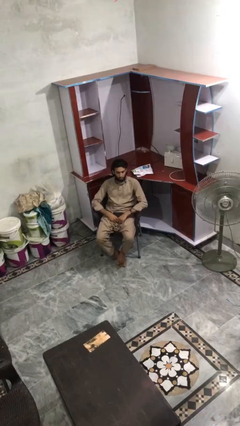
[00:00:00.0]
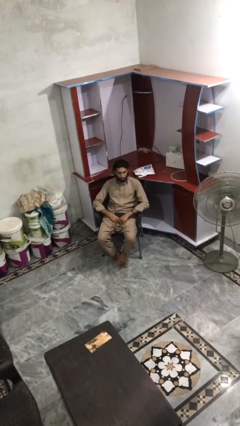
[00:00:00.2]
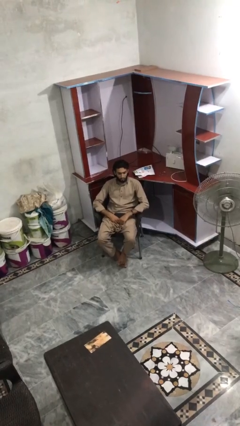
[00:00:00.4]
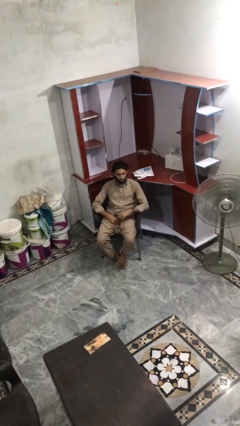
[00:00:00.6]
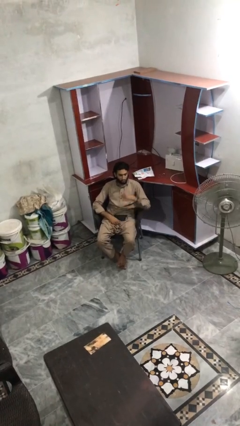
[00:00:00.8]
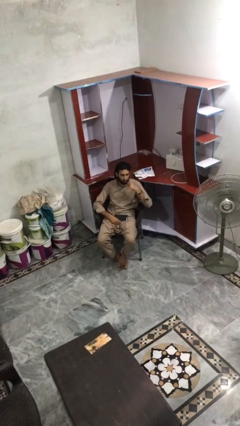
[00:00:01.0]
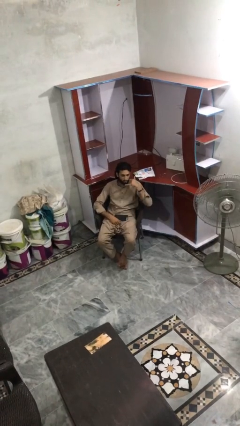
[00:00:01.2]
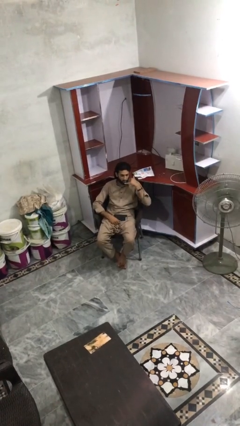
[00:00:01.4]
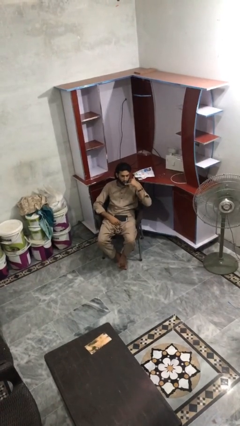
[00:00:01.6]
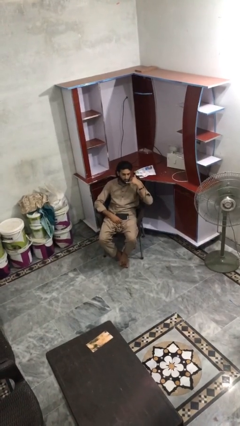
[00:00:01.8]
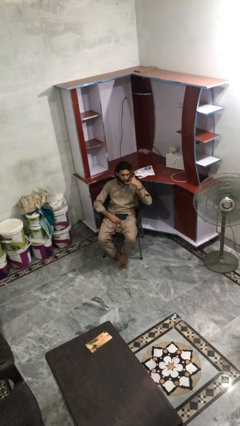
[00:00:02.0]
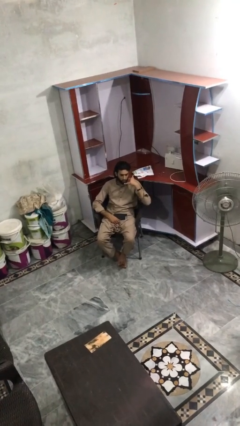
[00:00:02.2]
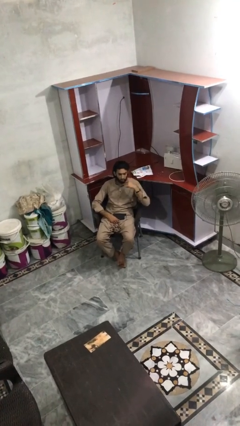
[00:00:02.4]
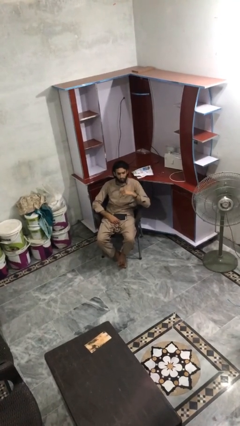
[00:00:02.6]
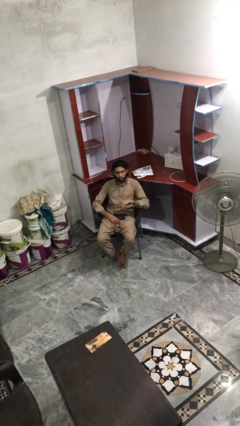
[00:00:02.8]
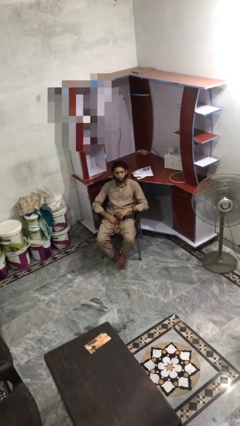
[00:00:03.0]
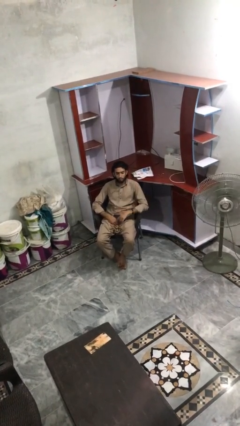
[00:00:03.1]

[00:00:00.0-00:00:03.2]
person gestures call me

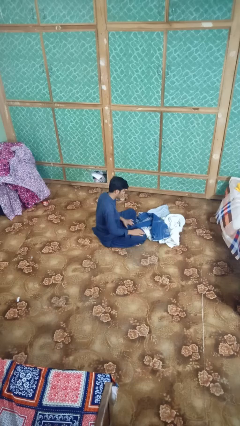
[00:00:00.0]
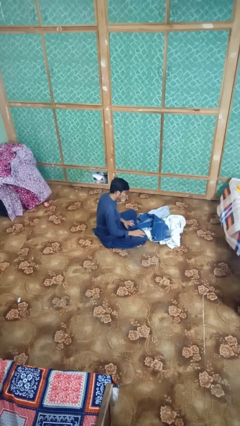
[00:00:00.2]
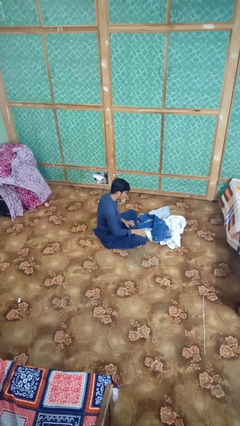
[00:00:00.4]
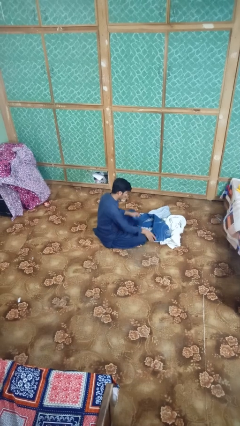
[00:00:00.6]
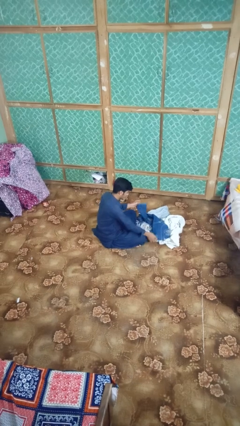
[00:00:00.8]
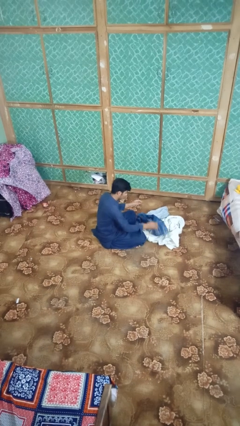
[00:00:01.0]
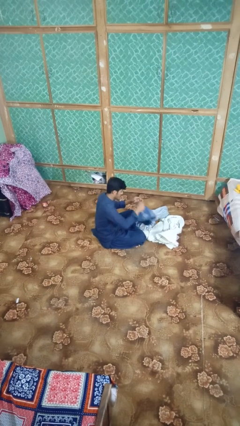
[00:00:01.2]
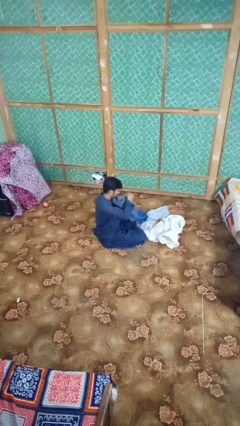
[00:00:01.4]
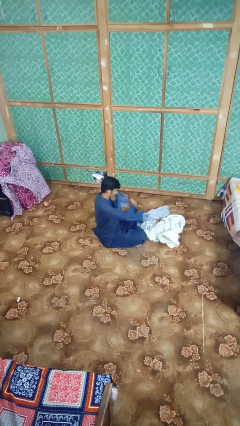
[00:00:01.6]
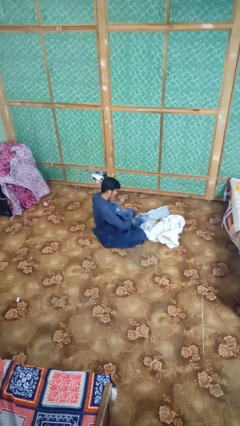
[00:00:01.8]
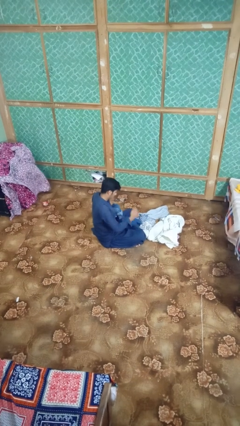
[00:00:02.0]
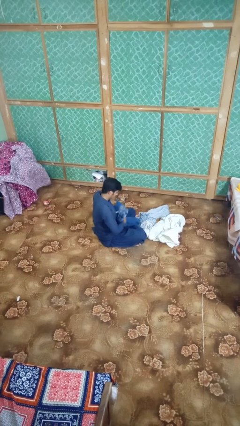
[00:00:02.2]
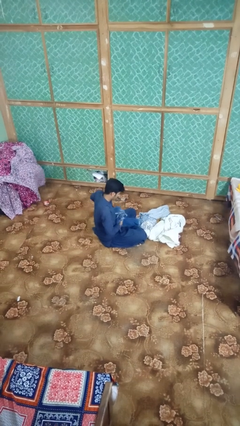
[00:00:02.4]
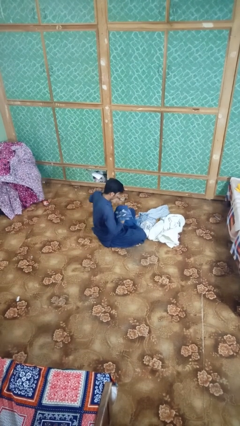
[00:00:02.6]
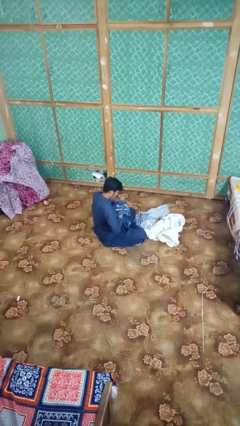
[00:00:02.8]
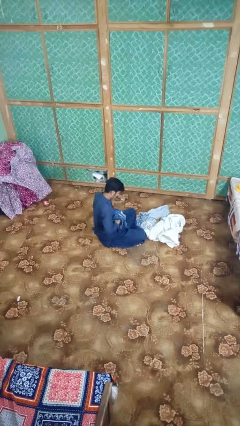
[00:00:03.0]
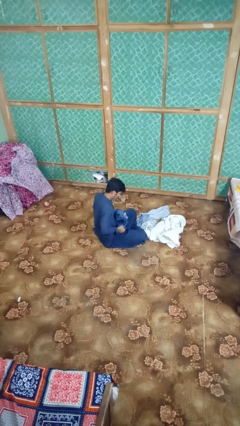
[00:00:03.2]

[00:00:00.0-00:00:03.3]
person folds pants

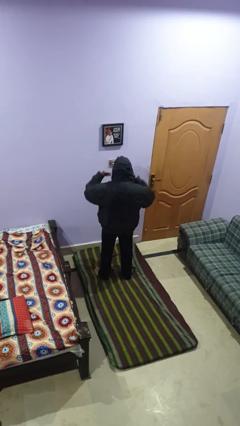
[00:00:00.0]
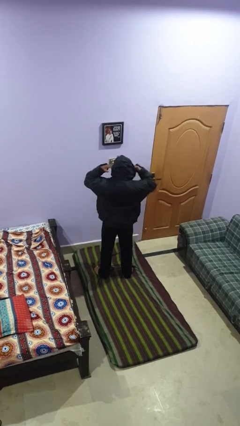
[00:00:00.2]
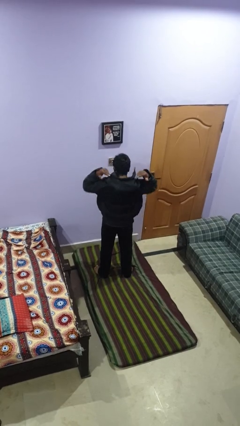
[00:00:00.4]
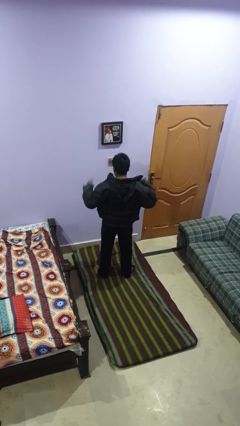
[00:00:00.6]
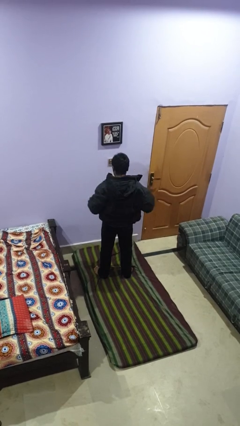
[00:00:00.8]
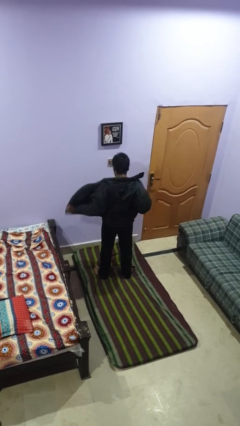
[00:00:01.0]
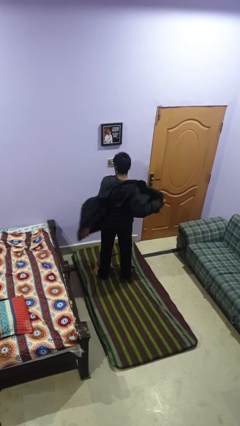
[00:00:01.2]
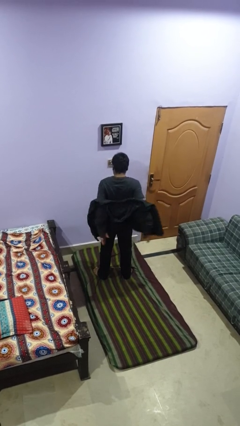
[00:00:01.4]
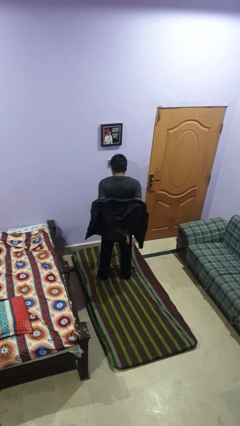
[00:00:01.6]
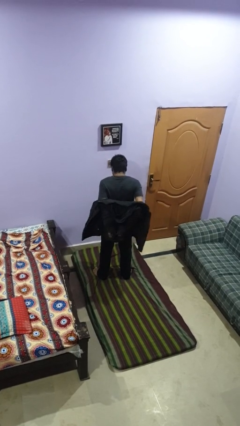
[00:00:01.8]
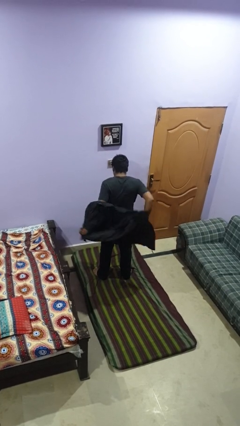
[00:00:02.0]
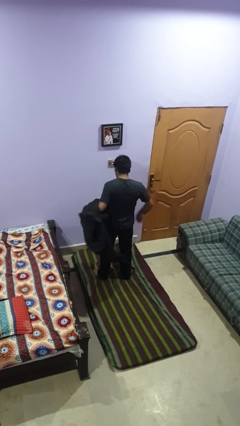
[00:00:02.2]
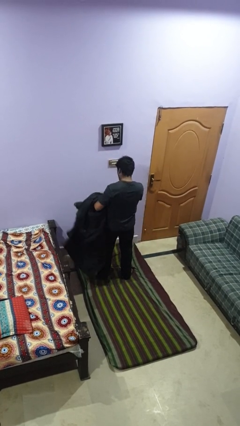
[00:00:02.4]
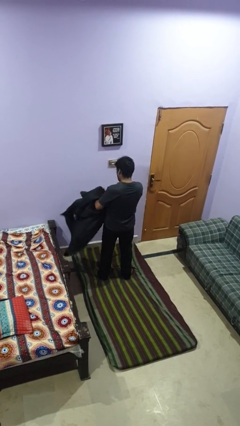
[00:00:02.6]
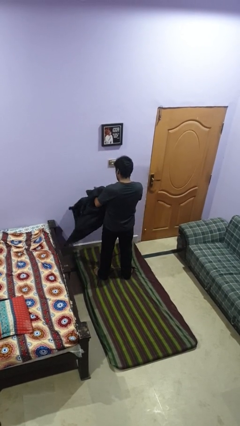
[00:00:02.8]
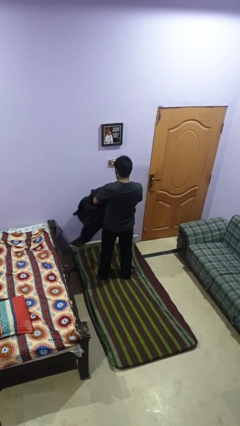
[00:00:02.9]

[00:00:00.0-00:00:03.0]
person takes off hoodie

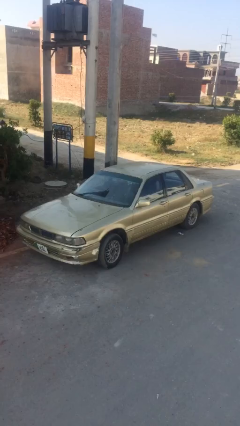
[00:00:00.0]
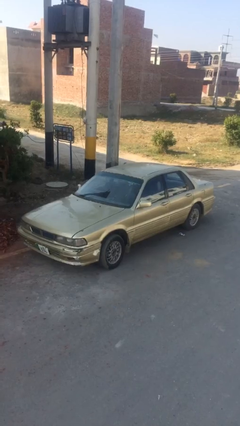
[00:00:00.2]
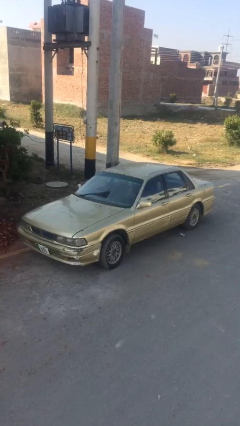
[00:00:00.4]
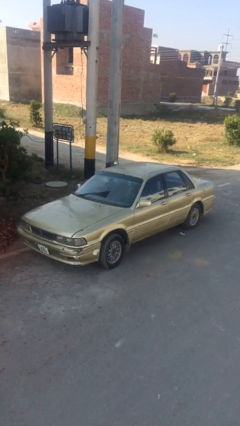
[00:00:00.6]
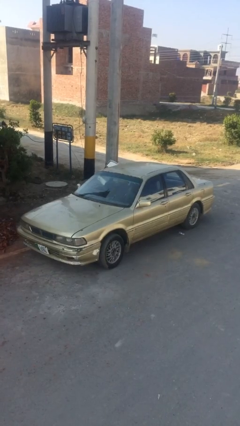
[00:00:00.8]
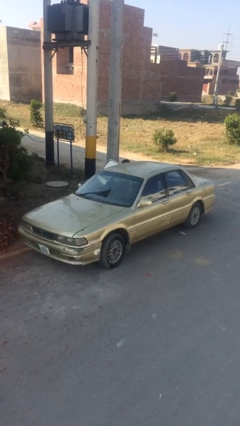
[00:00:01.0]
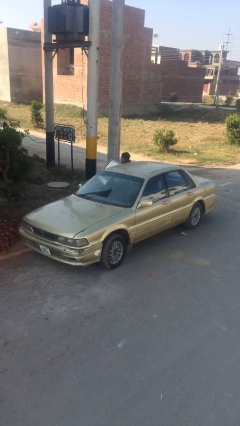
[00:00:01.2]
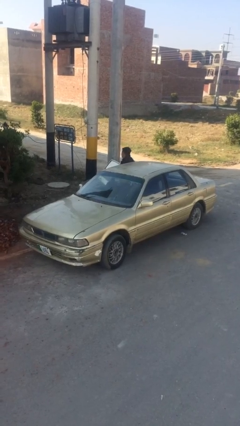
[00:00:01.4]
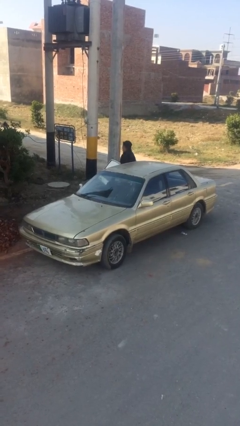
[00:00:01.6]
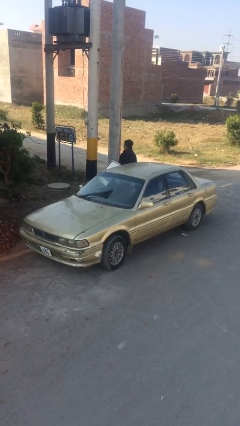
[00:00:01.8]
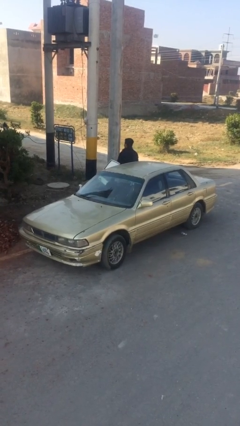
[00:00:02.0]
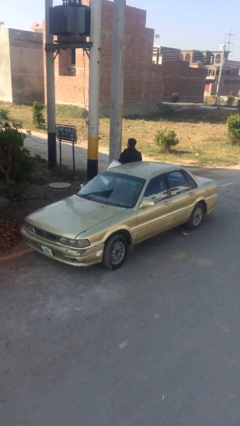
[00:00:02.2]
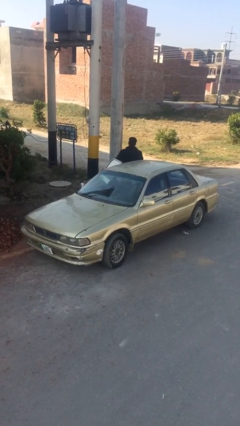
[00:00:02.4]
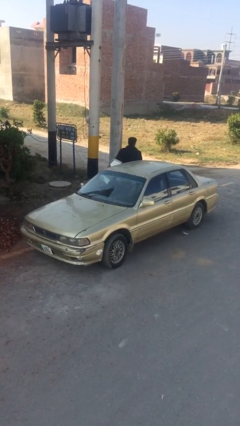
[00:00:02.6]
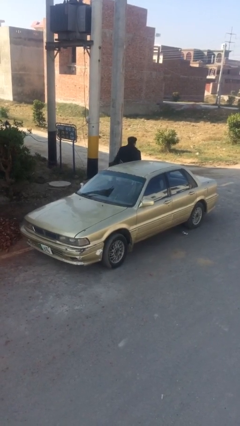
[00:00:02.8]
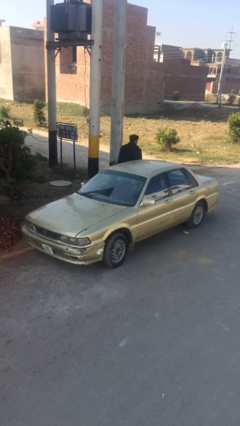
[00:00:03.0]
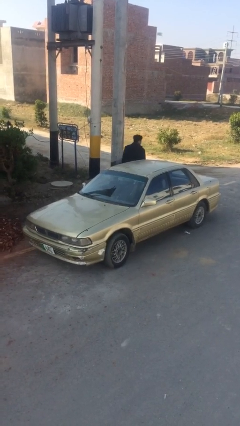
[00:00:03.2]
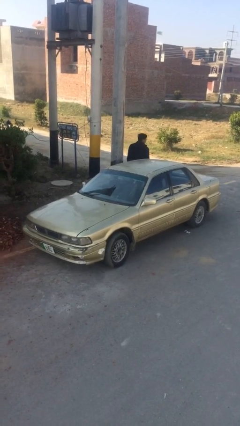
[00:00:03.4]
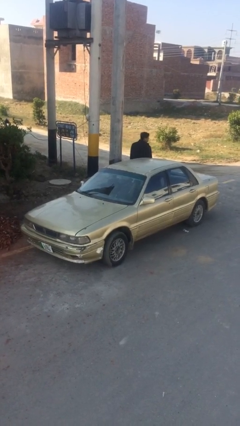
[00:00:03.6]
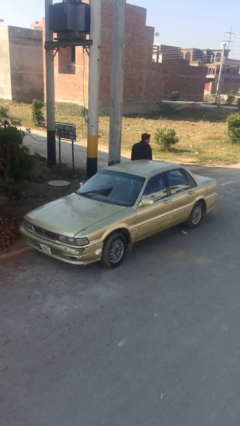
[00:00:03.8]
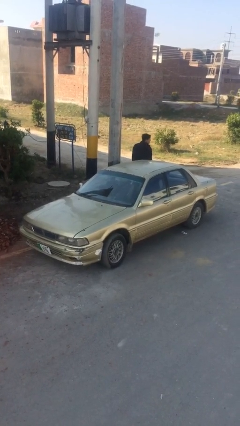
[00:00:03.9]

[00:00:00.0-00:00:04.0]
car drops off person

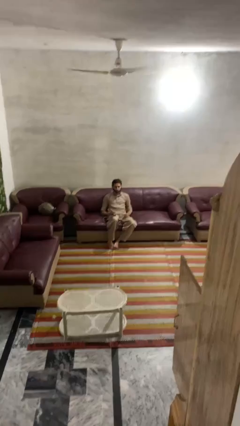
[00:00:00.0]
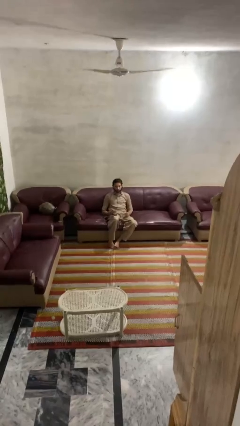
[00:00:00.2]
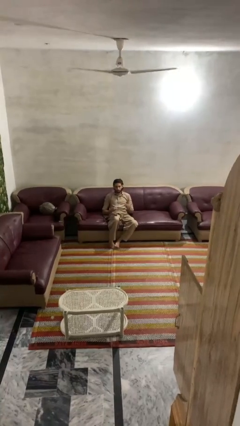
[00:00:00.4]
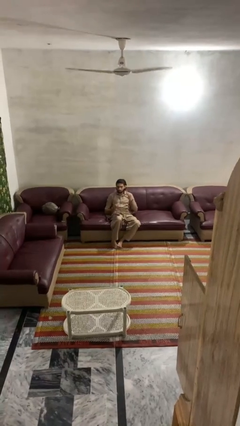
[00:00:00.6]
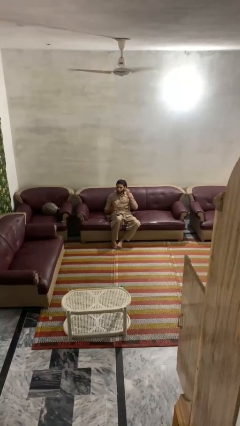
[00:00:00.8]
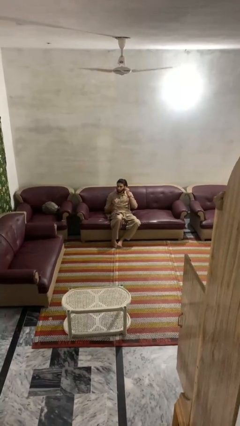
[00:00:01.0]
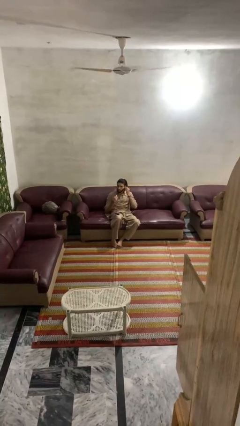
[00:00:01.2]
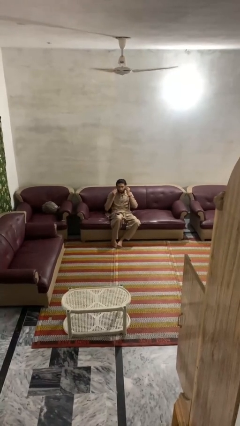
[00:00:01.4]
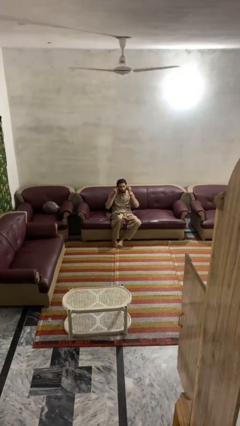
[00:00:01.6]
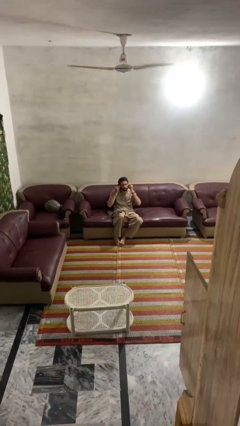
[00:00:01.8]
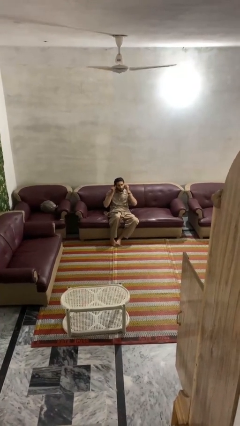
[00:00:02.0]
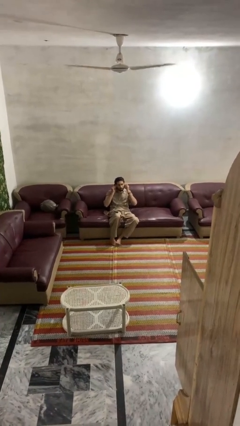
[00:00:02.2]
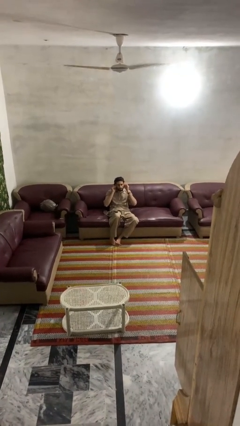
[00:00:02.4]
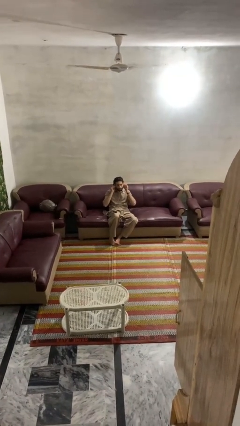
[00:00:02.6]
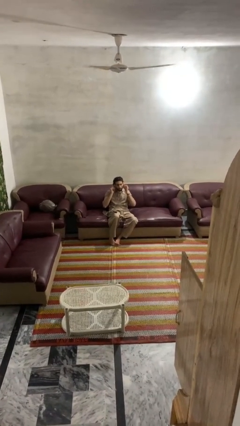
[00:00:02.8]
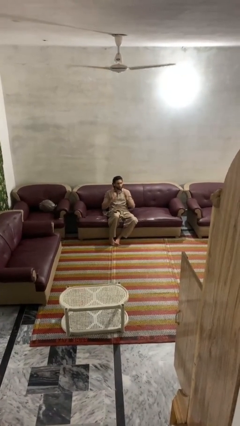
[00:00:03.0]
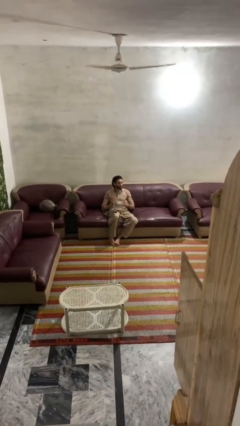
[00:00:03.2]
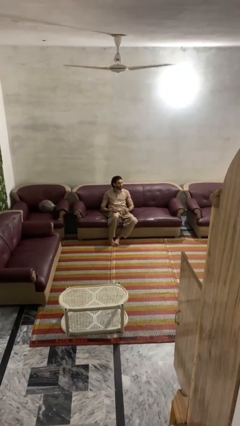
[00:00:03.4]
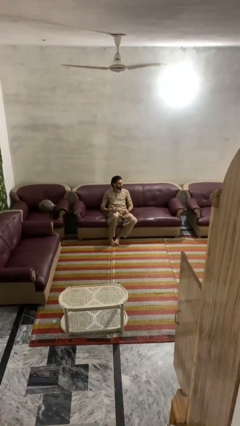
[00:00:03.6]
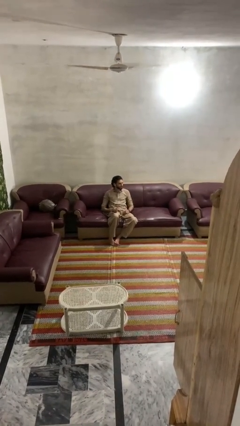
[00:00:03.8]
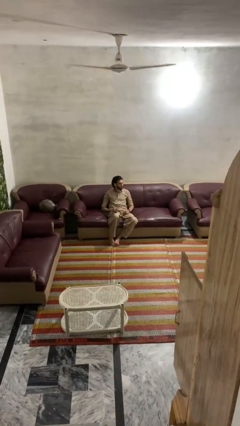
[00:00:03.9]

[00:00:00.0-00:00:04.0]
person puts on headphones
